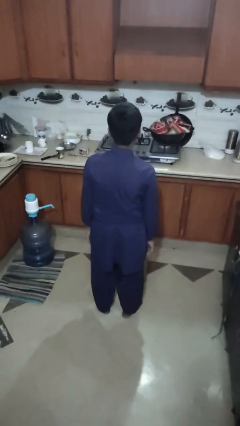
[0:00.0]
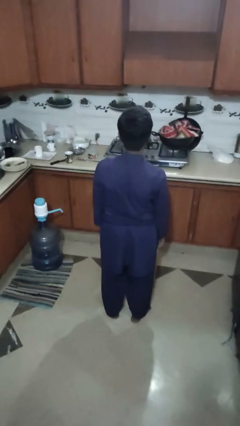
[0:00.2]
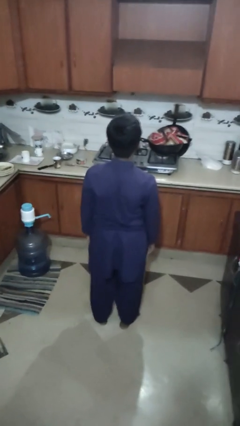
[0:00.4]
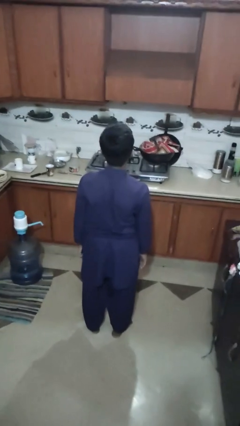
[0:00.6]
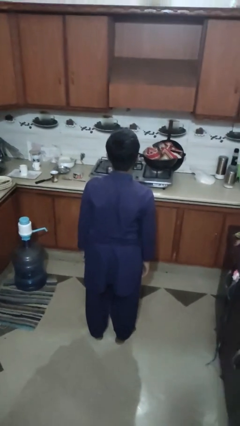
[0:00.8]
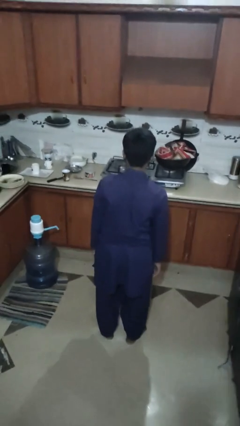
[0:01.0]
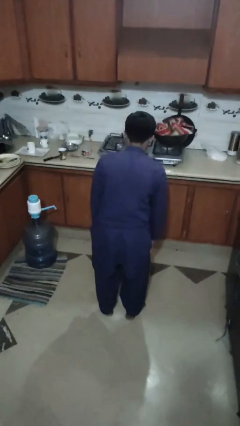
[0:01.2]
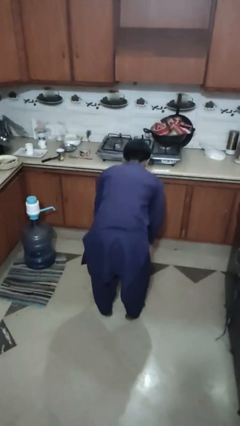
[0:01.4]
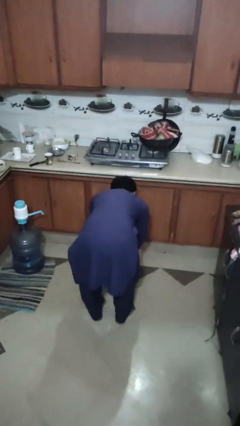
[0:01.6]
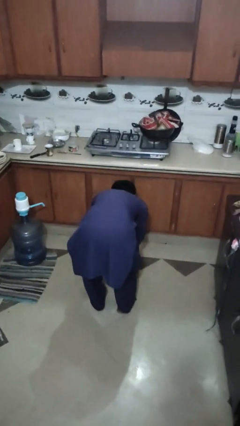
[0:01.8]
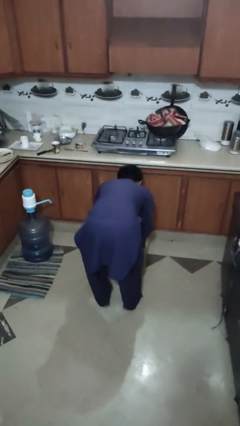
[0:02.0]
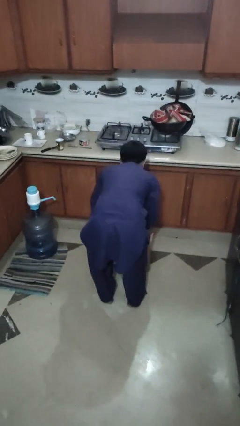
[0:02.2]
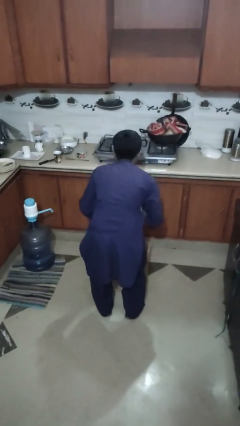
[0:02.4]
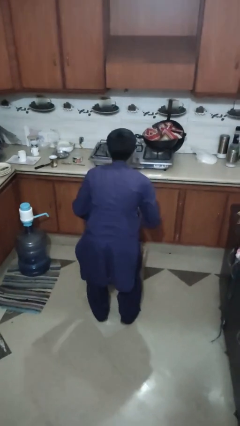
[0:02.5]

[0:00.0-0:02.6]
person takes object from box

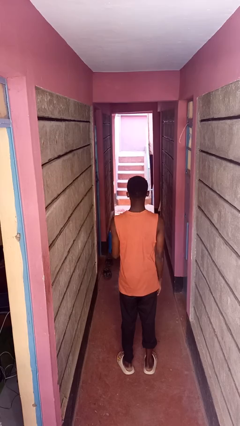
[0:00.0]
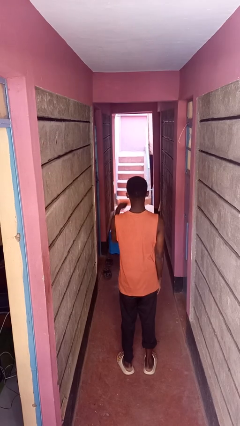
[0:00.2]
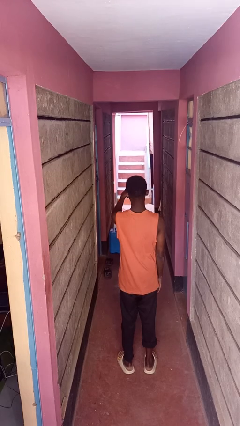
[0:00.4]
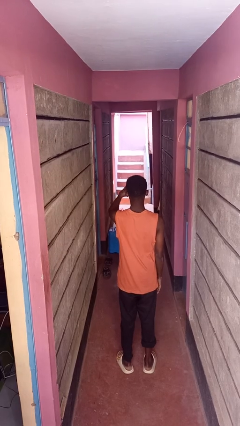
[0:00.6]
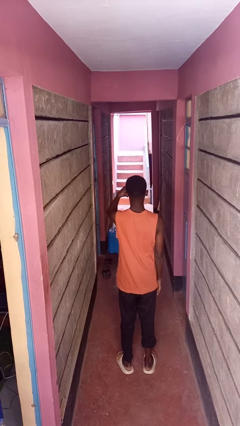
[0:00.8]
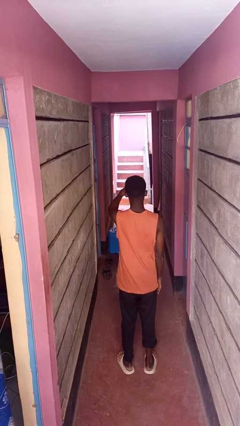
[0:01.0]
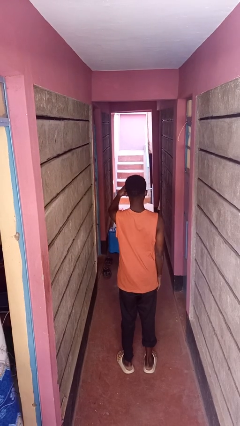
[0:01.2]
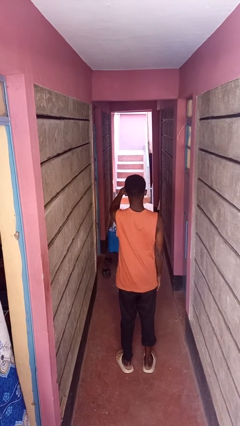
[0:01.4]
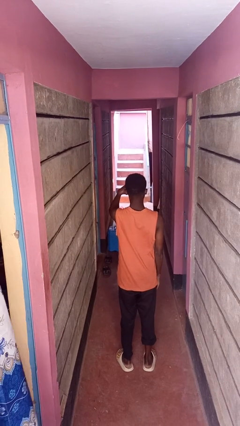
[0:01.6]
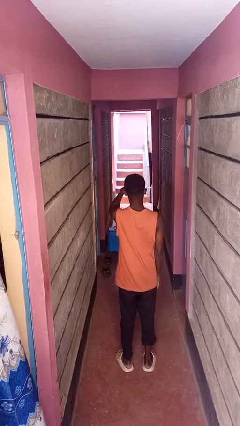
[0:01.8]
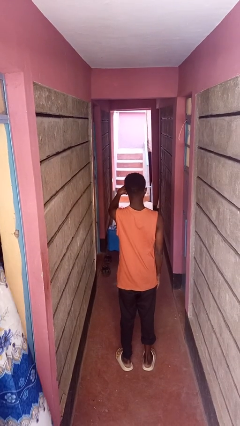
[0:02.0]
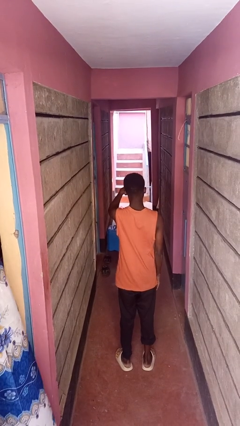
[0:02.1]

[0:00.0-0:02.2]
person rubs eyes

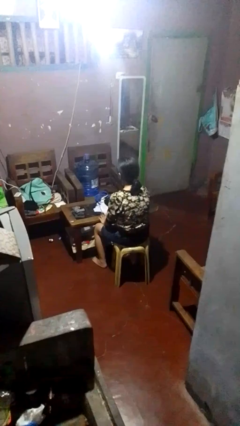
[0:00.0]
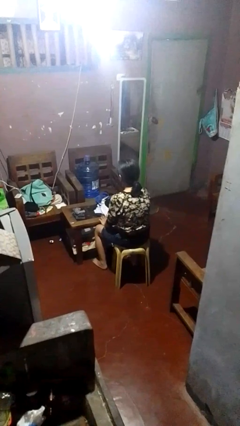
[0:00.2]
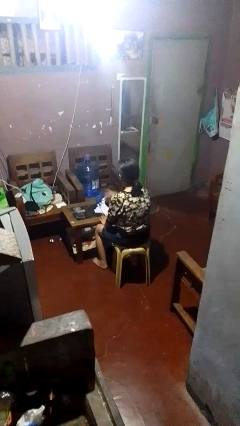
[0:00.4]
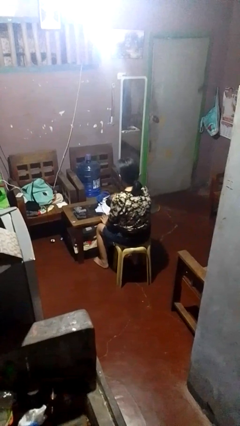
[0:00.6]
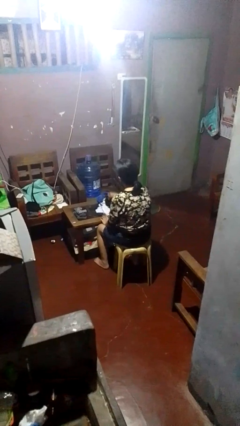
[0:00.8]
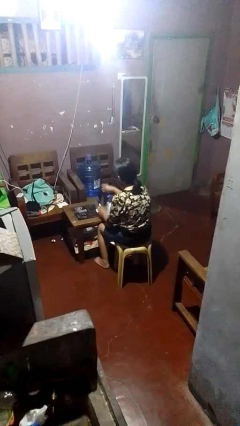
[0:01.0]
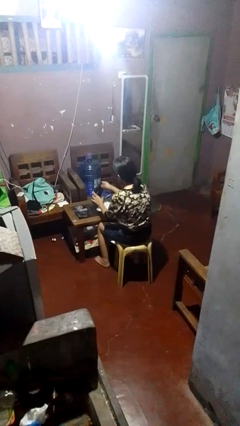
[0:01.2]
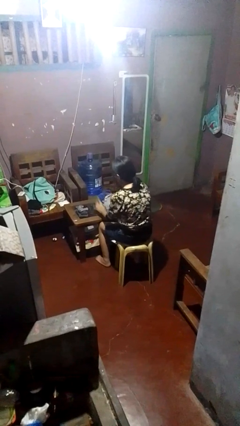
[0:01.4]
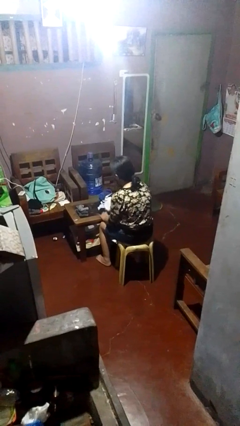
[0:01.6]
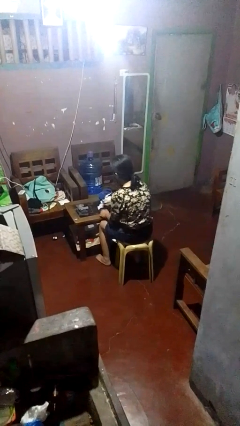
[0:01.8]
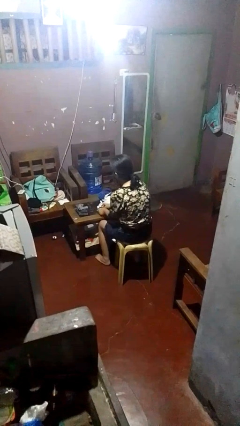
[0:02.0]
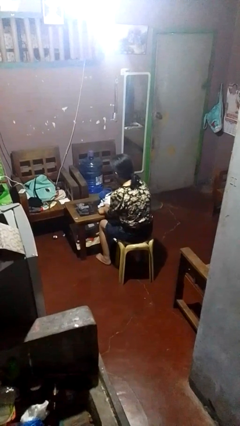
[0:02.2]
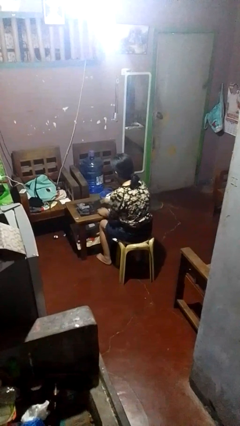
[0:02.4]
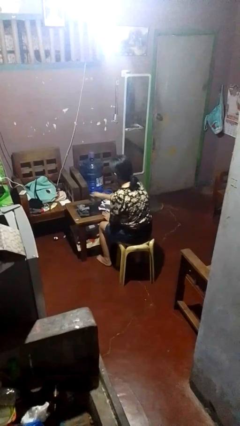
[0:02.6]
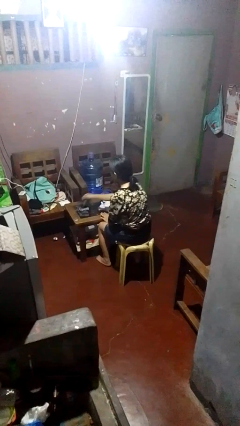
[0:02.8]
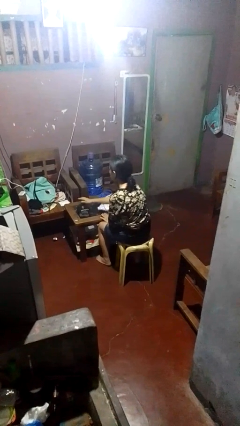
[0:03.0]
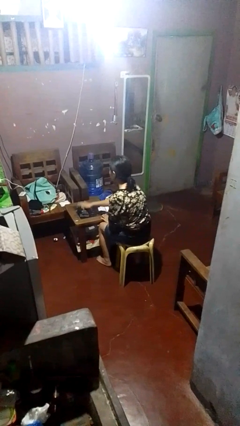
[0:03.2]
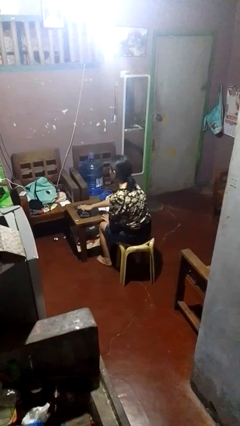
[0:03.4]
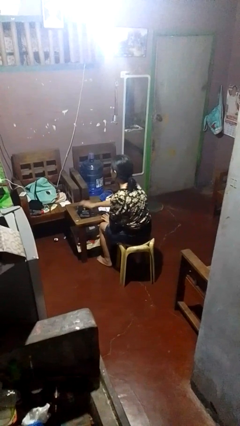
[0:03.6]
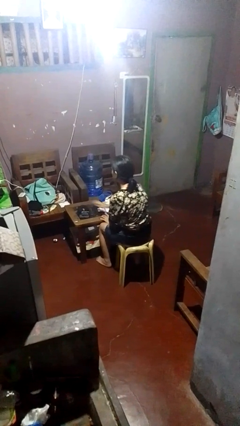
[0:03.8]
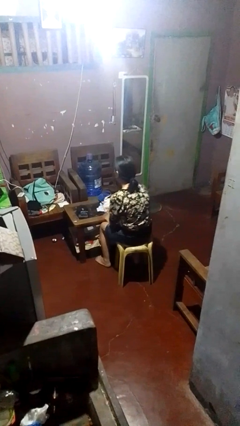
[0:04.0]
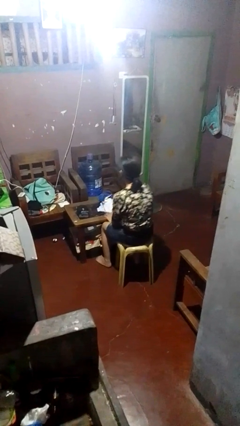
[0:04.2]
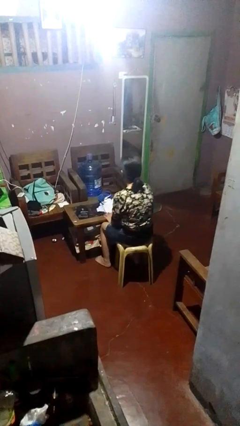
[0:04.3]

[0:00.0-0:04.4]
person folds socks

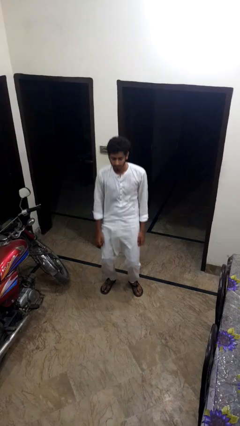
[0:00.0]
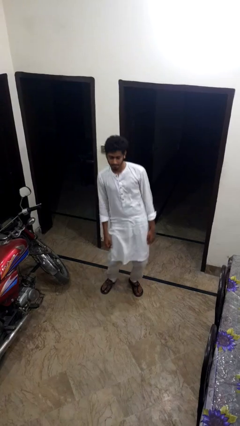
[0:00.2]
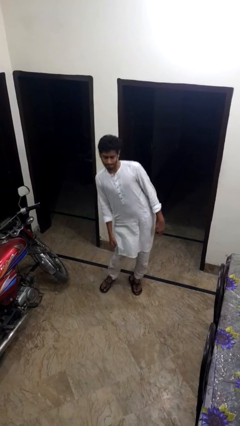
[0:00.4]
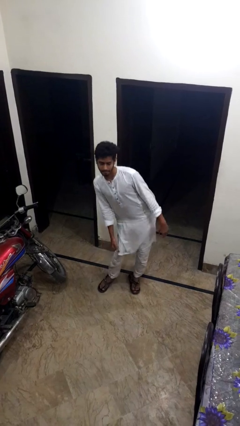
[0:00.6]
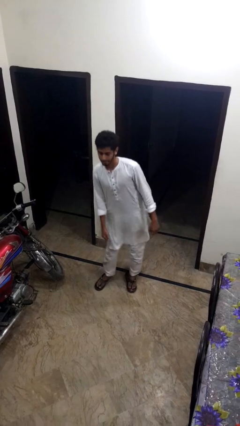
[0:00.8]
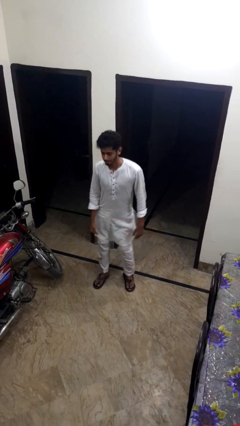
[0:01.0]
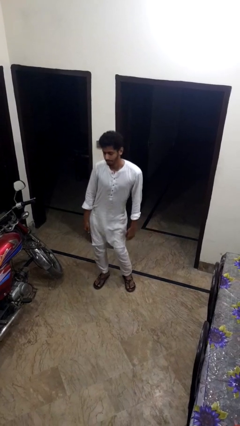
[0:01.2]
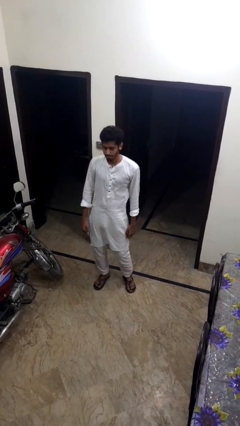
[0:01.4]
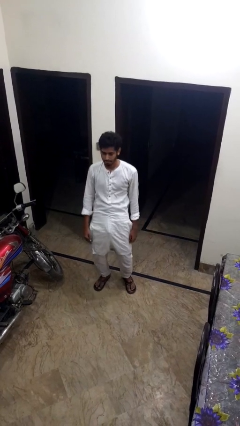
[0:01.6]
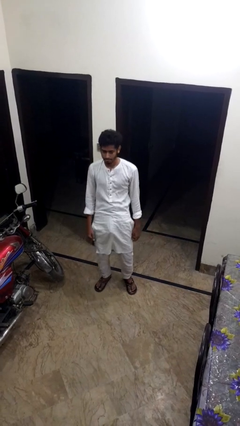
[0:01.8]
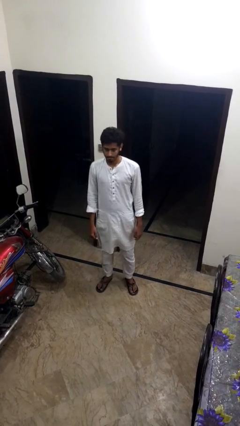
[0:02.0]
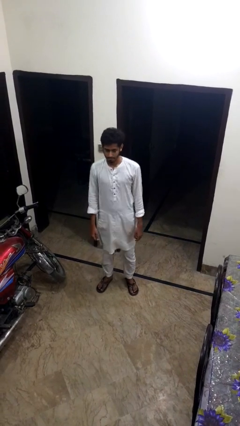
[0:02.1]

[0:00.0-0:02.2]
person wiggles hips

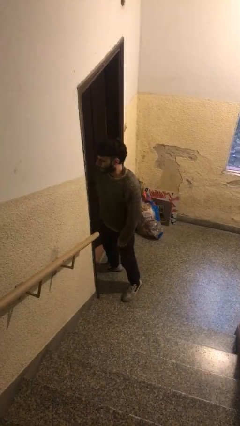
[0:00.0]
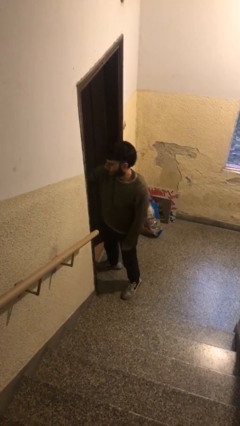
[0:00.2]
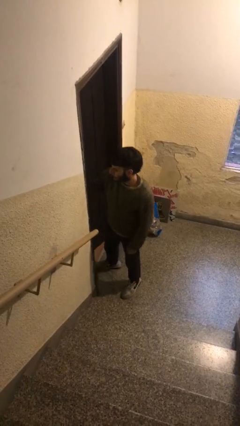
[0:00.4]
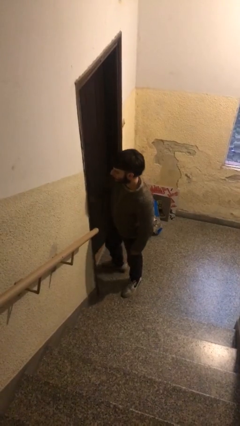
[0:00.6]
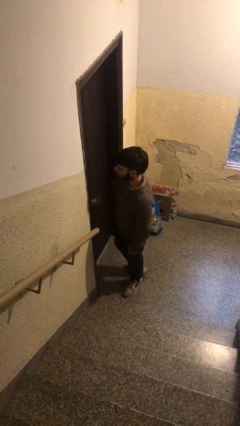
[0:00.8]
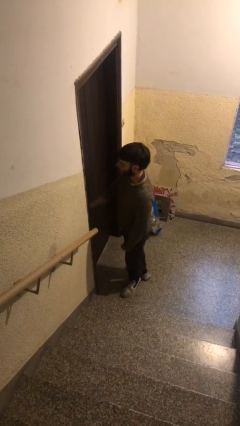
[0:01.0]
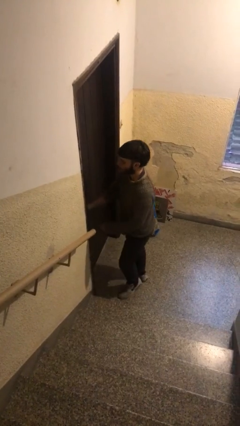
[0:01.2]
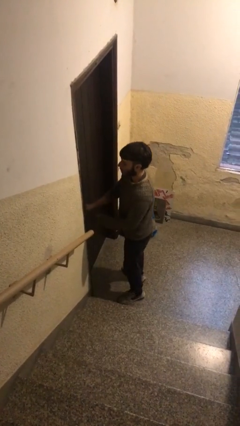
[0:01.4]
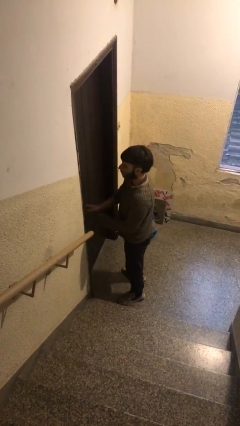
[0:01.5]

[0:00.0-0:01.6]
person closes facility door

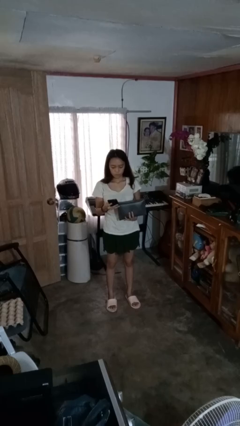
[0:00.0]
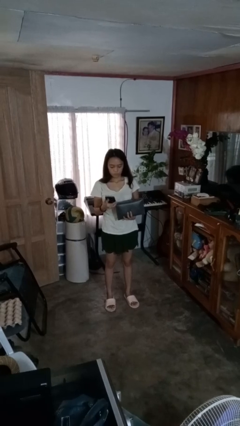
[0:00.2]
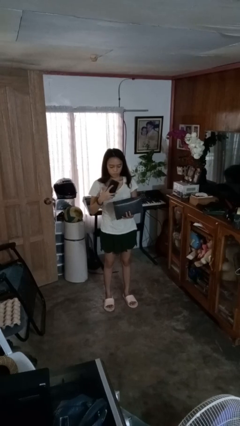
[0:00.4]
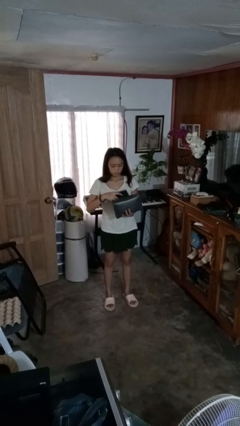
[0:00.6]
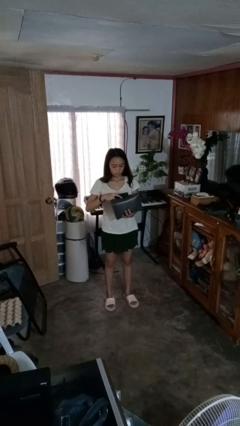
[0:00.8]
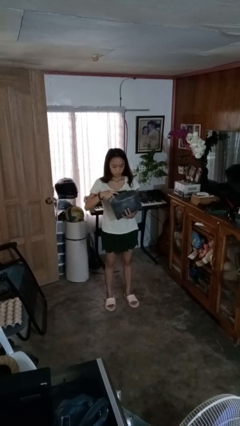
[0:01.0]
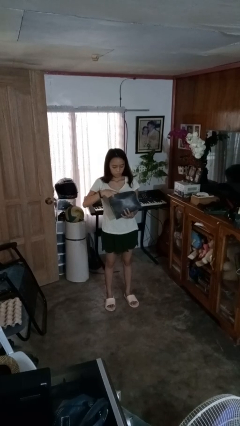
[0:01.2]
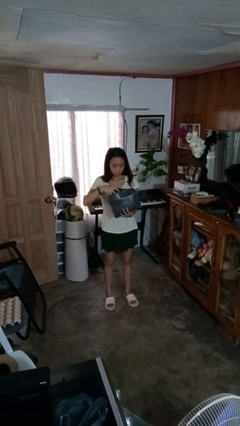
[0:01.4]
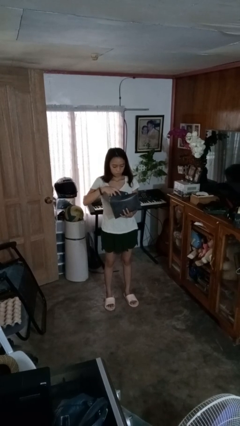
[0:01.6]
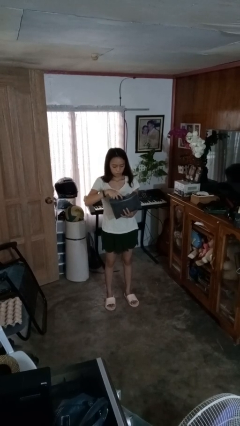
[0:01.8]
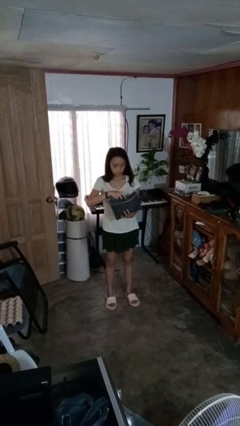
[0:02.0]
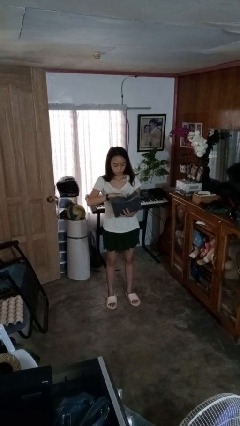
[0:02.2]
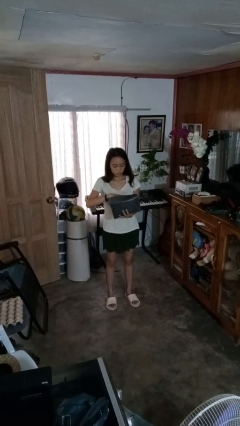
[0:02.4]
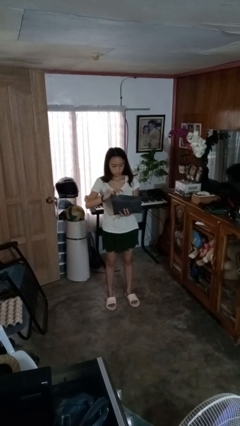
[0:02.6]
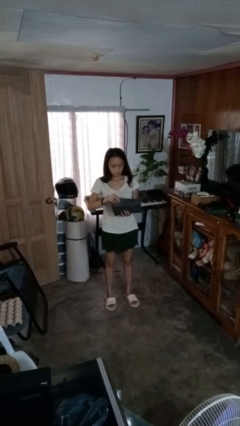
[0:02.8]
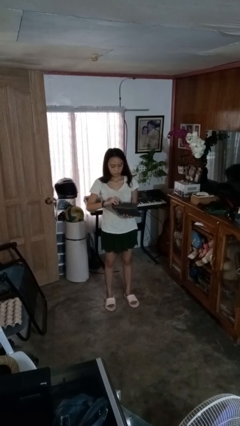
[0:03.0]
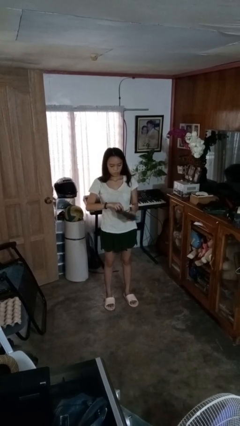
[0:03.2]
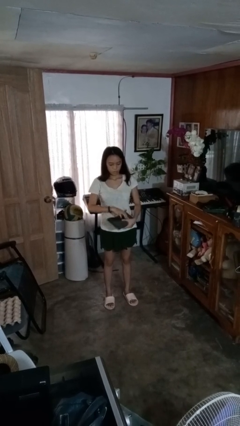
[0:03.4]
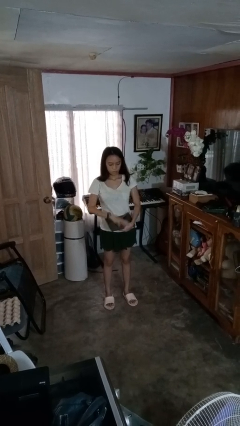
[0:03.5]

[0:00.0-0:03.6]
person puts object into purse

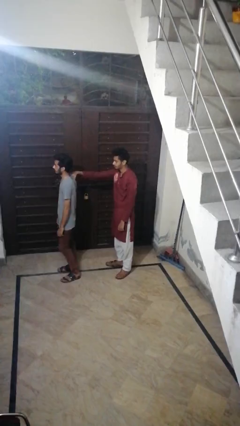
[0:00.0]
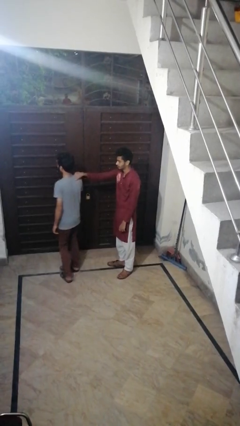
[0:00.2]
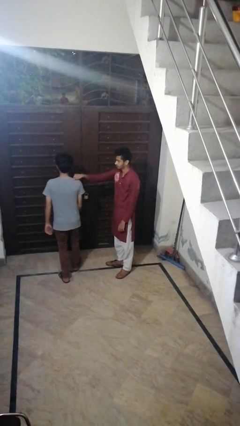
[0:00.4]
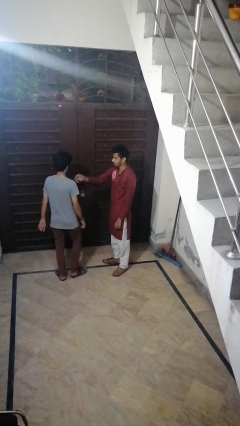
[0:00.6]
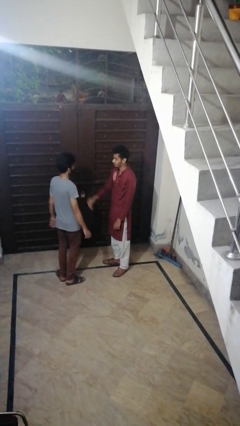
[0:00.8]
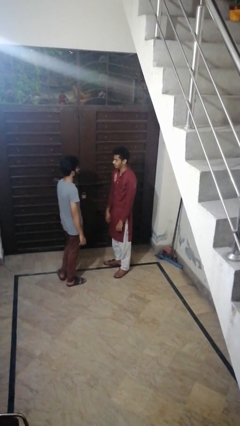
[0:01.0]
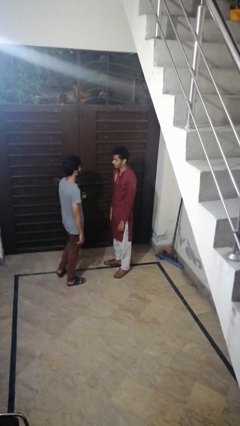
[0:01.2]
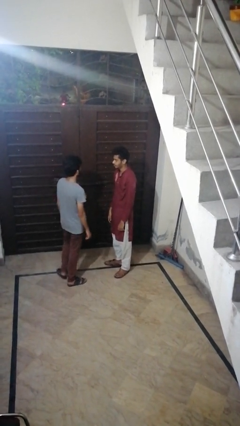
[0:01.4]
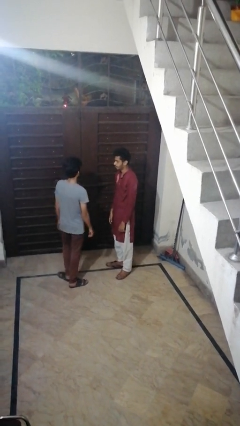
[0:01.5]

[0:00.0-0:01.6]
person spins person around
